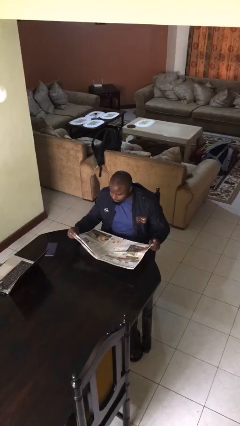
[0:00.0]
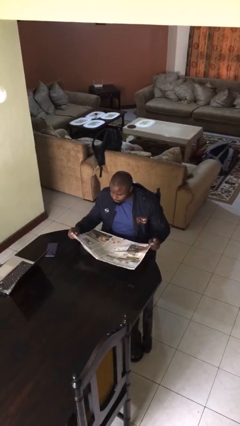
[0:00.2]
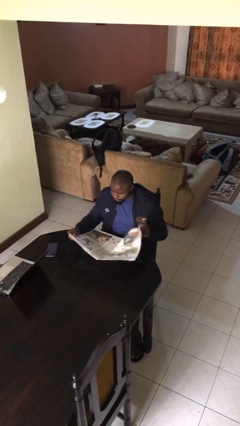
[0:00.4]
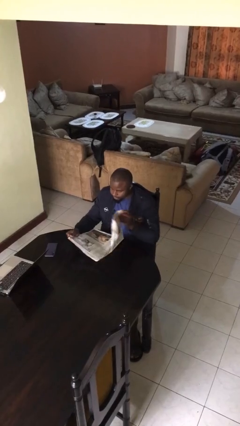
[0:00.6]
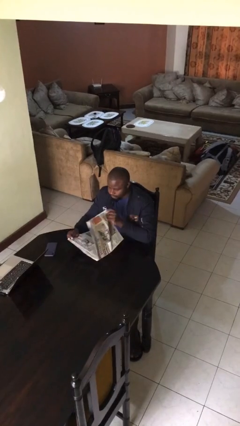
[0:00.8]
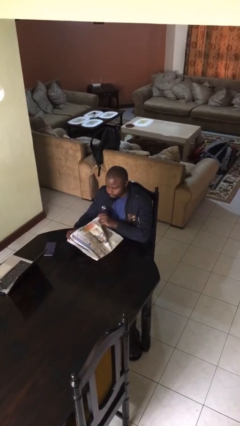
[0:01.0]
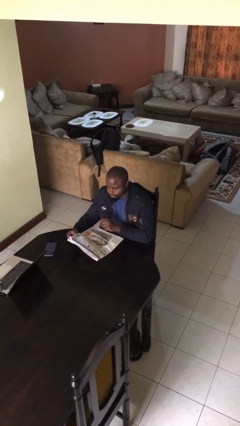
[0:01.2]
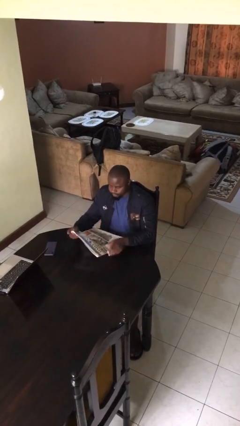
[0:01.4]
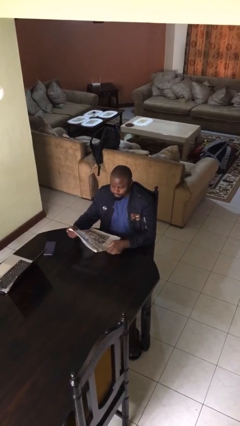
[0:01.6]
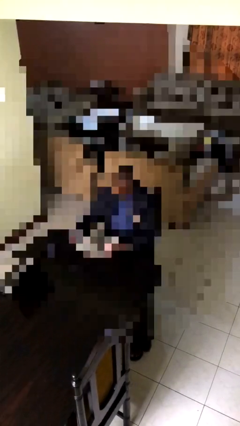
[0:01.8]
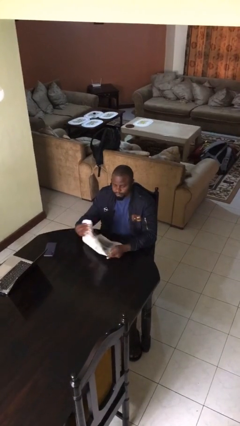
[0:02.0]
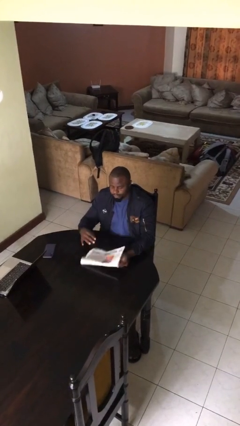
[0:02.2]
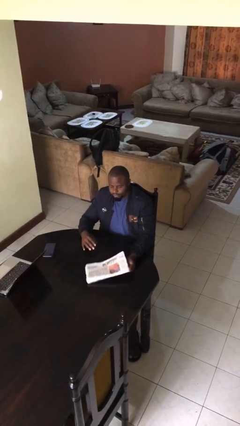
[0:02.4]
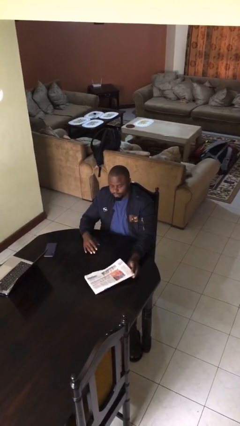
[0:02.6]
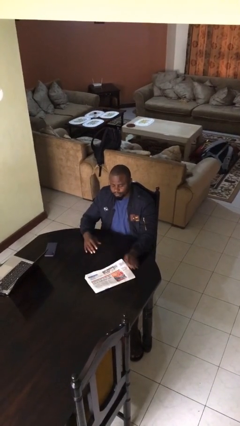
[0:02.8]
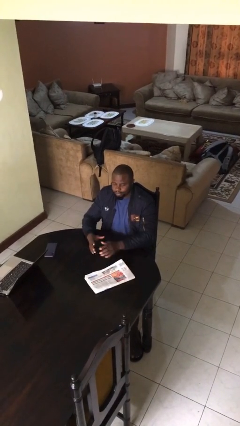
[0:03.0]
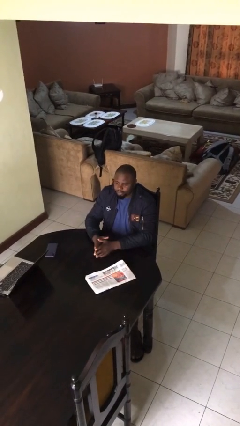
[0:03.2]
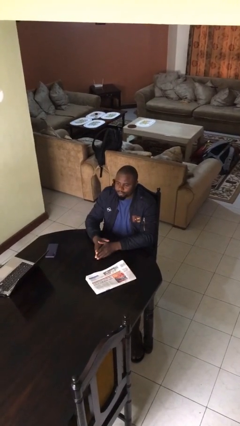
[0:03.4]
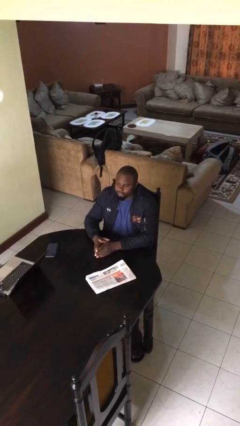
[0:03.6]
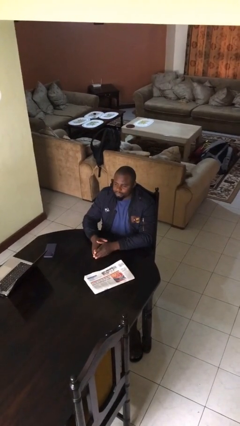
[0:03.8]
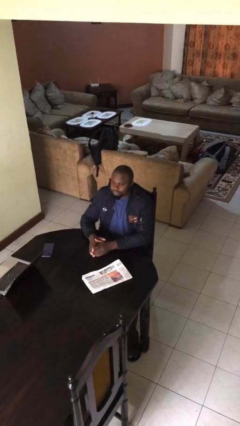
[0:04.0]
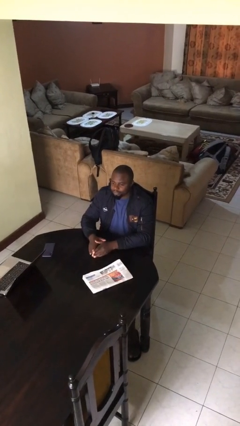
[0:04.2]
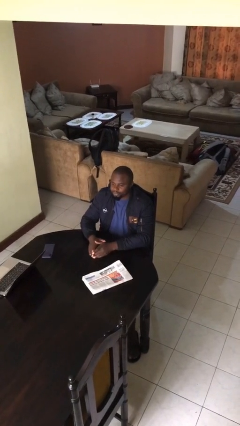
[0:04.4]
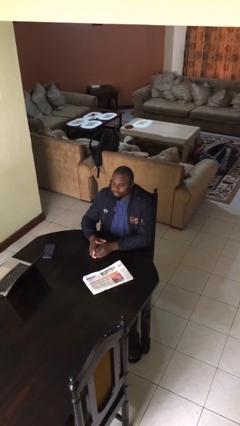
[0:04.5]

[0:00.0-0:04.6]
person puts down object on table

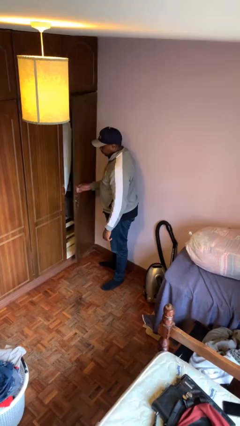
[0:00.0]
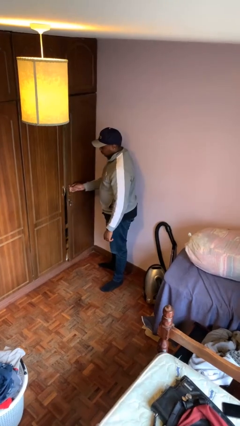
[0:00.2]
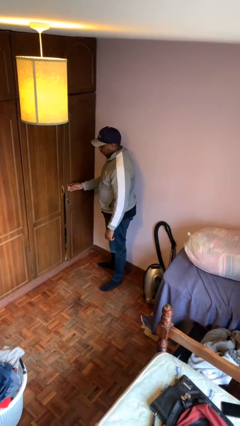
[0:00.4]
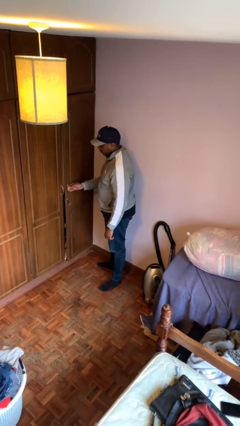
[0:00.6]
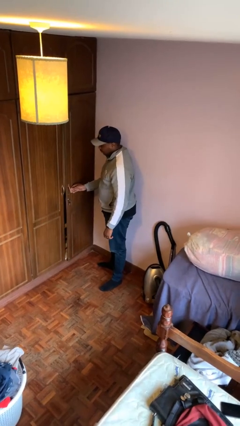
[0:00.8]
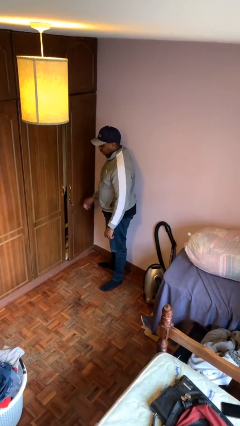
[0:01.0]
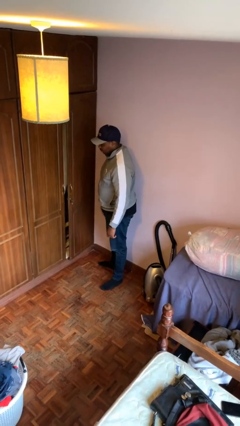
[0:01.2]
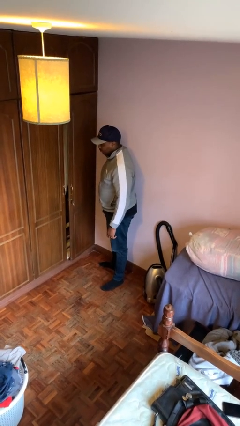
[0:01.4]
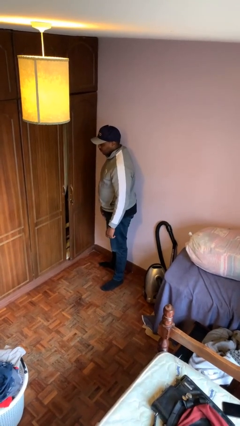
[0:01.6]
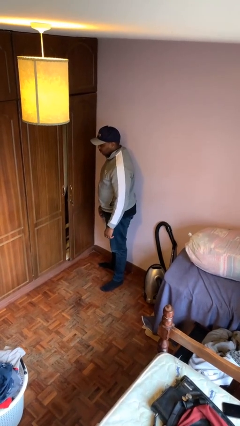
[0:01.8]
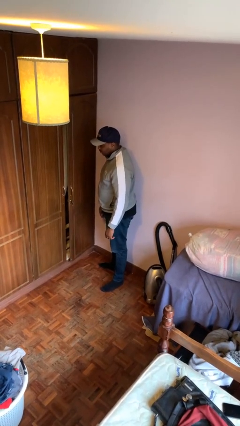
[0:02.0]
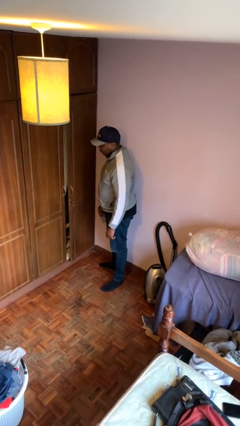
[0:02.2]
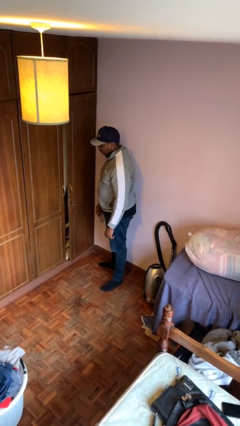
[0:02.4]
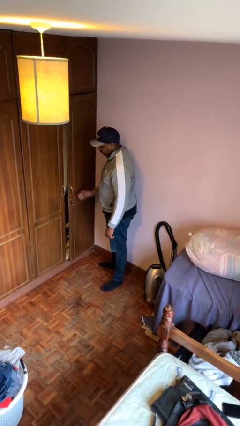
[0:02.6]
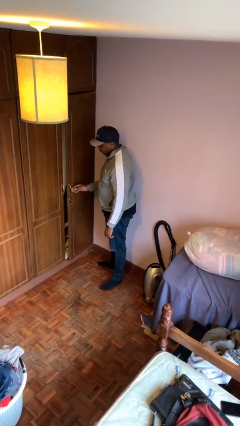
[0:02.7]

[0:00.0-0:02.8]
person closes closet door

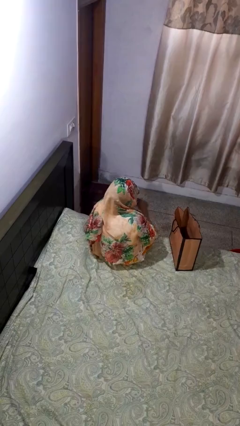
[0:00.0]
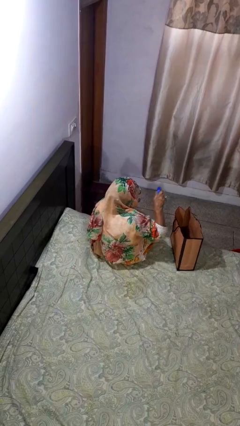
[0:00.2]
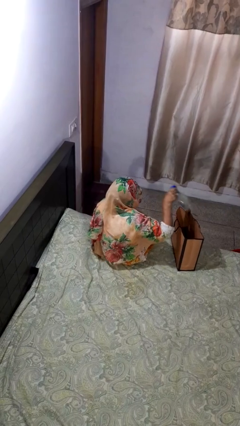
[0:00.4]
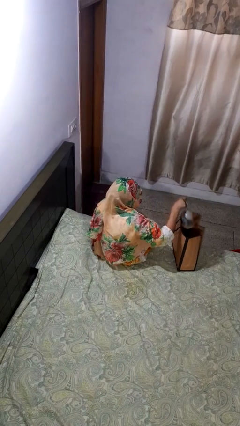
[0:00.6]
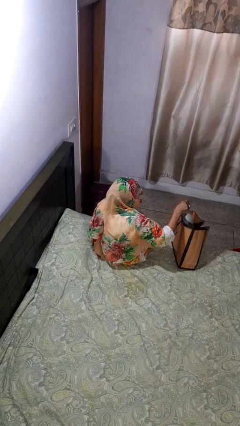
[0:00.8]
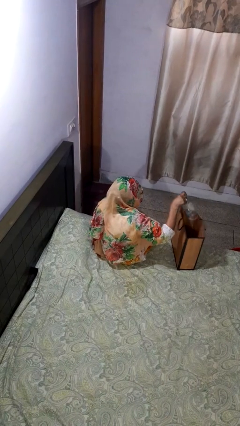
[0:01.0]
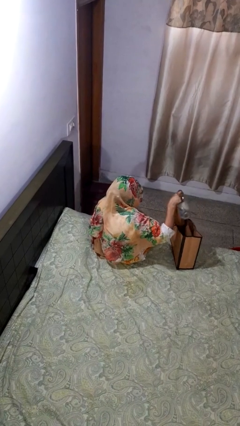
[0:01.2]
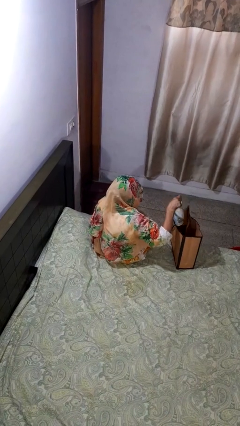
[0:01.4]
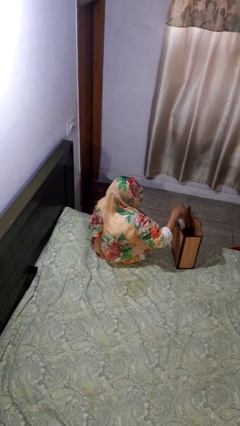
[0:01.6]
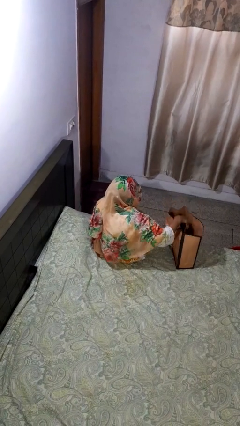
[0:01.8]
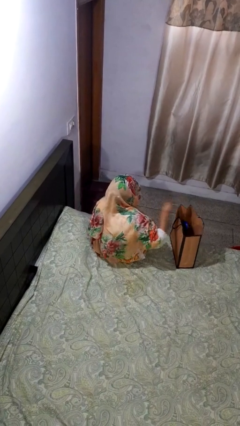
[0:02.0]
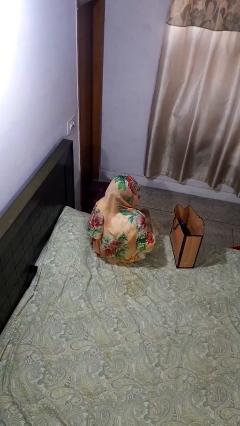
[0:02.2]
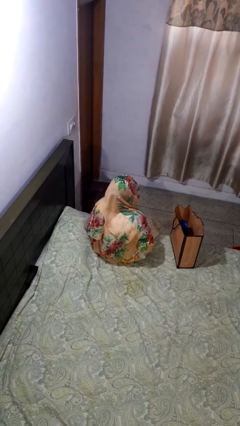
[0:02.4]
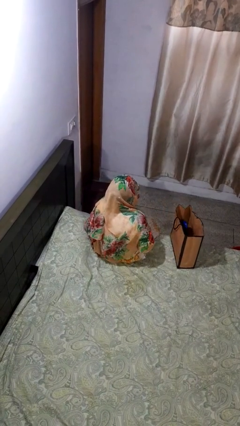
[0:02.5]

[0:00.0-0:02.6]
person puts object into bag

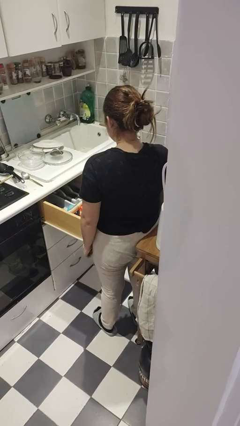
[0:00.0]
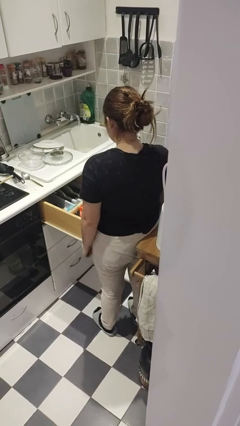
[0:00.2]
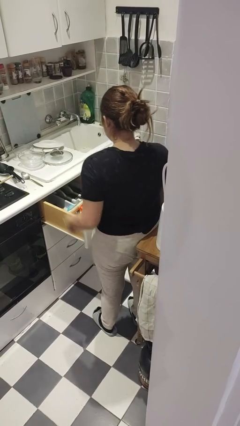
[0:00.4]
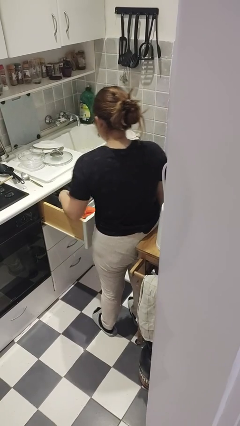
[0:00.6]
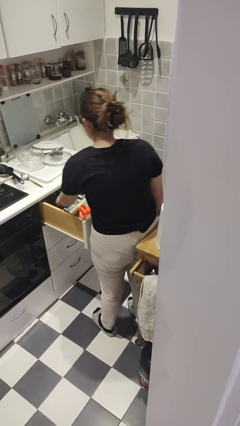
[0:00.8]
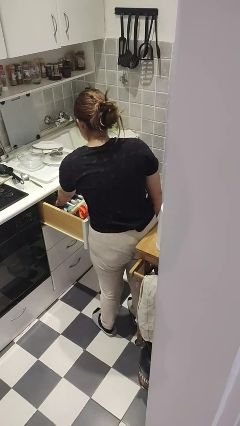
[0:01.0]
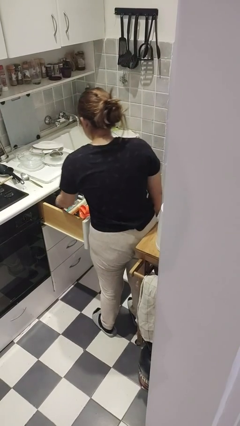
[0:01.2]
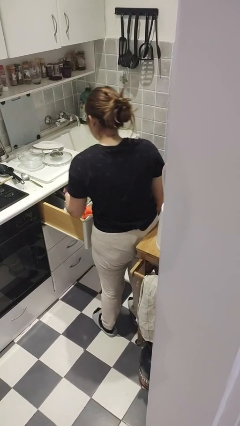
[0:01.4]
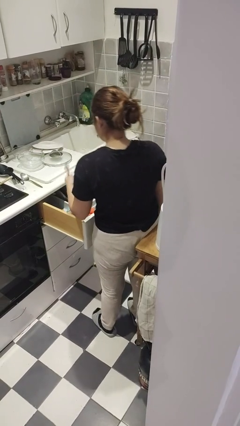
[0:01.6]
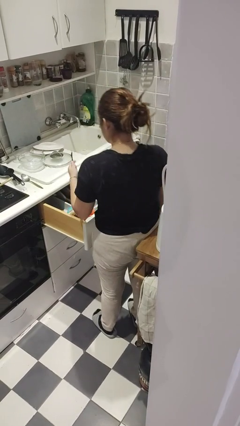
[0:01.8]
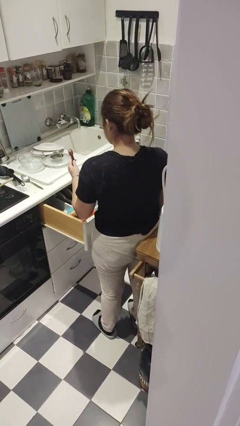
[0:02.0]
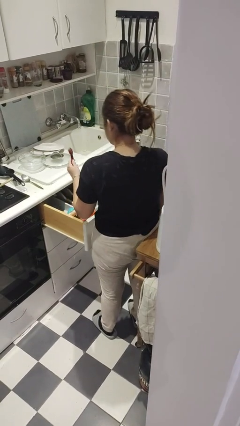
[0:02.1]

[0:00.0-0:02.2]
person takes object from kitchen drawer

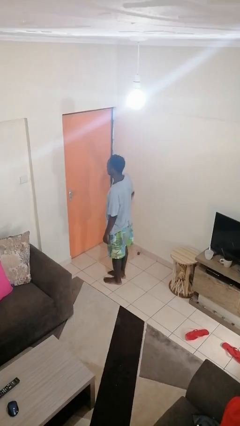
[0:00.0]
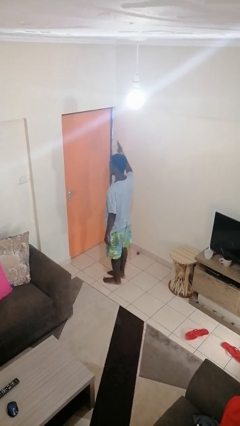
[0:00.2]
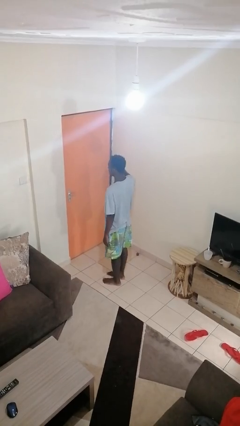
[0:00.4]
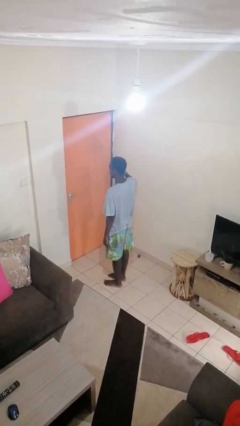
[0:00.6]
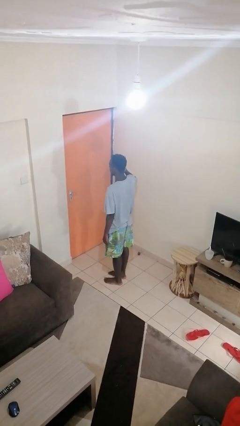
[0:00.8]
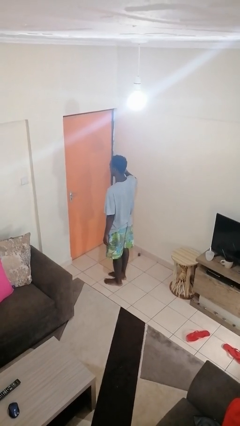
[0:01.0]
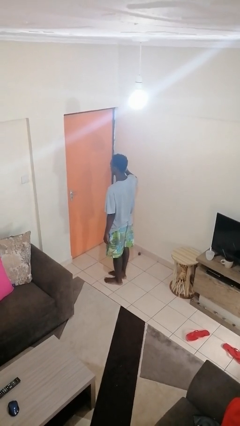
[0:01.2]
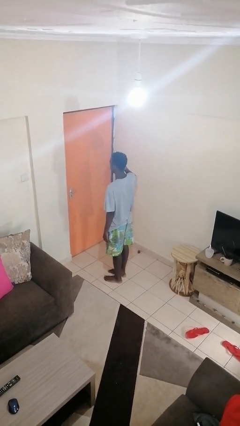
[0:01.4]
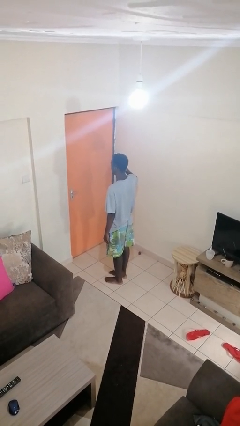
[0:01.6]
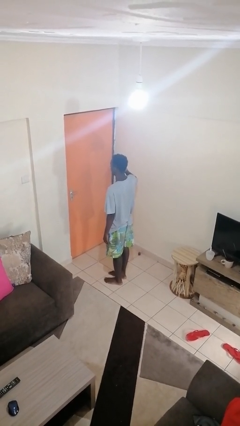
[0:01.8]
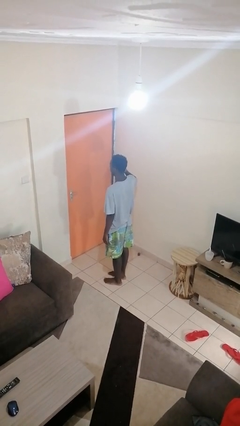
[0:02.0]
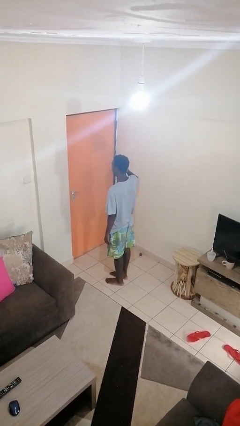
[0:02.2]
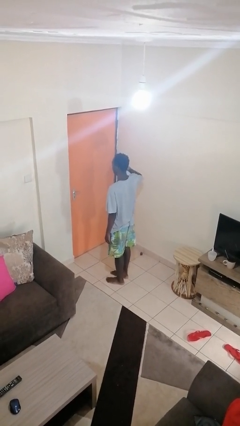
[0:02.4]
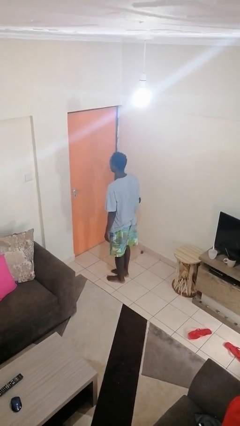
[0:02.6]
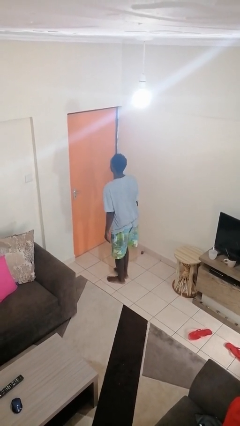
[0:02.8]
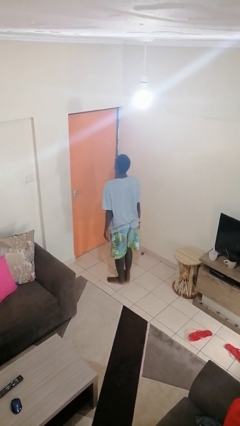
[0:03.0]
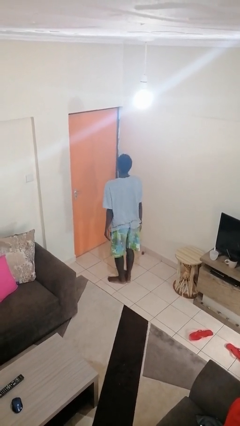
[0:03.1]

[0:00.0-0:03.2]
person salutes

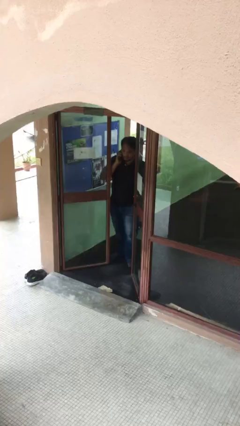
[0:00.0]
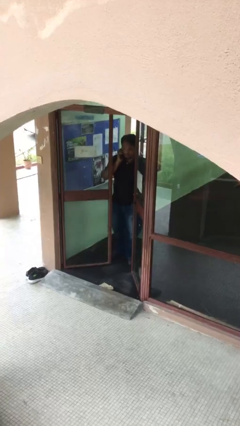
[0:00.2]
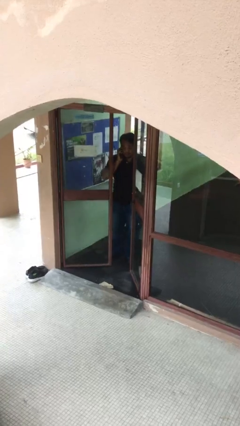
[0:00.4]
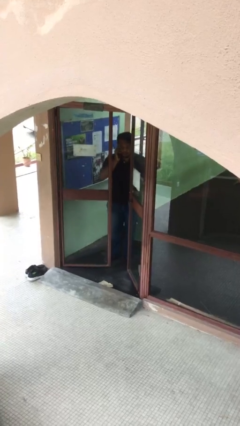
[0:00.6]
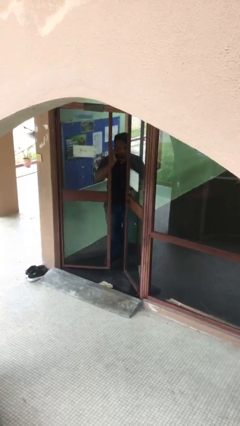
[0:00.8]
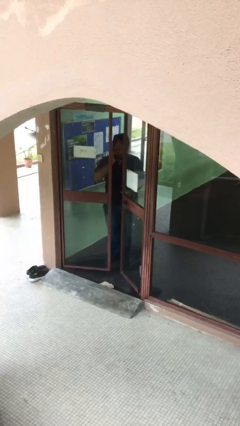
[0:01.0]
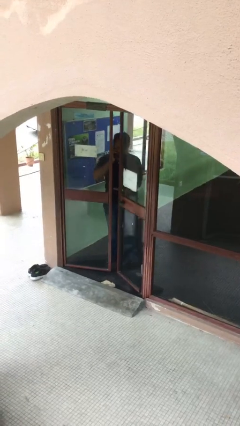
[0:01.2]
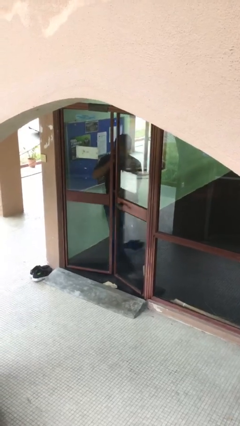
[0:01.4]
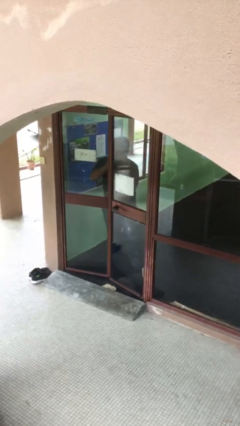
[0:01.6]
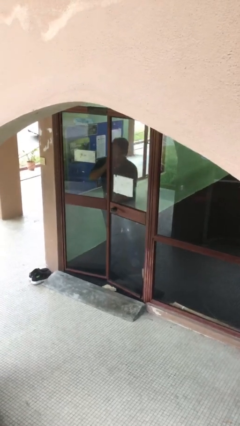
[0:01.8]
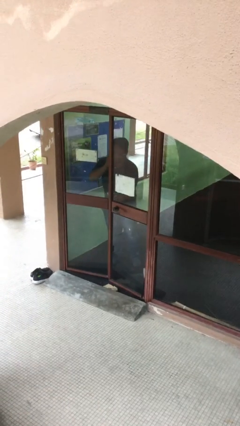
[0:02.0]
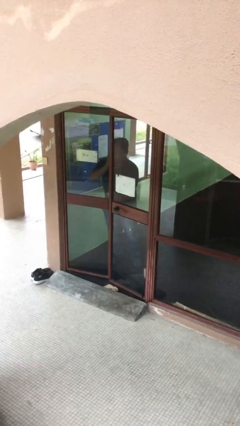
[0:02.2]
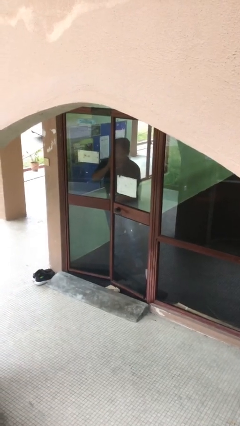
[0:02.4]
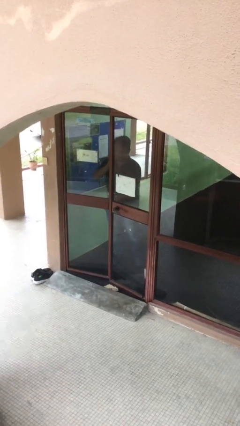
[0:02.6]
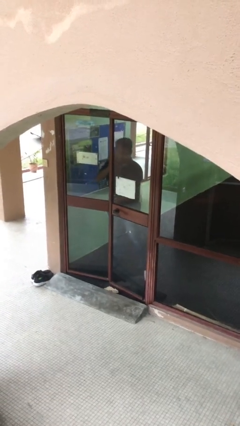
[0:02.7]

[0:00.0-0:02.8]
person closes facility door
